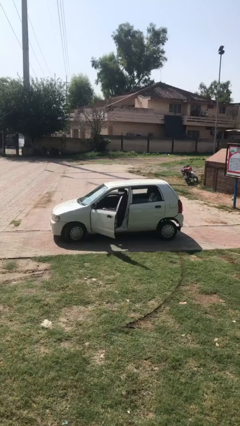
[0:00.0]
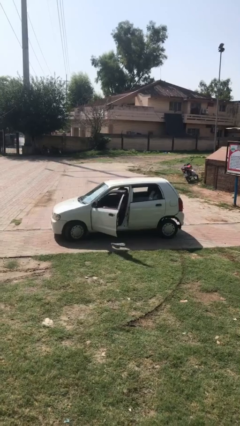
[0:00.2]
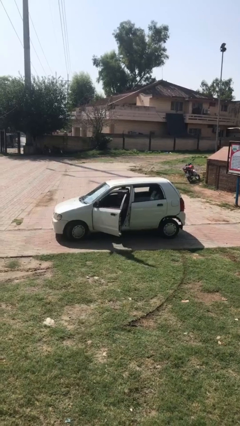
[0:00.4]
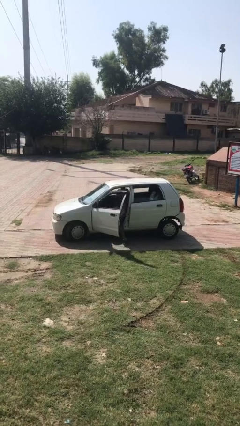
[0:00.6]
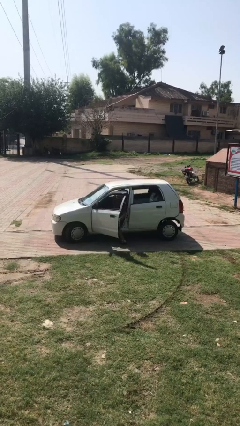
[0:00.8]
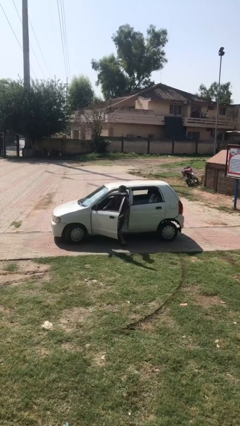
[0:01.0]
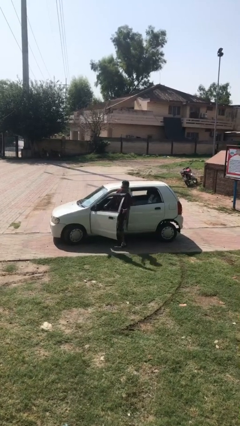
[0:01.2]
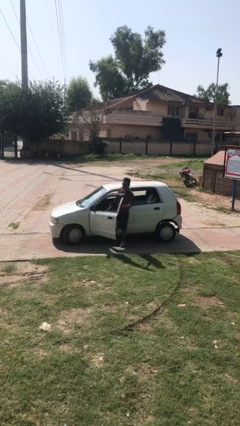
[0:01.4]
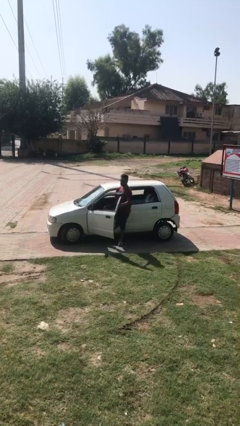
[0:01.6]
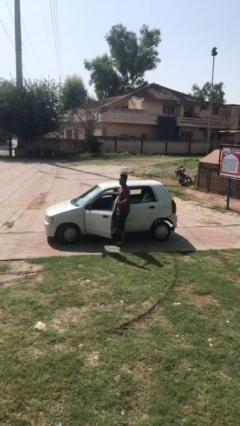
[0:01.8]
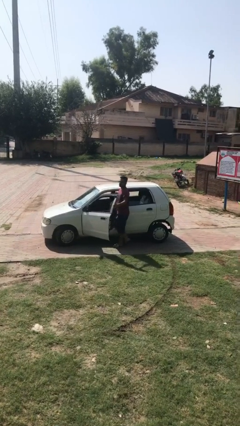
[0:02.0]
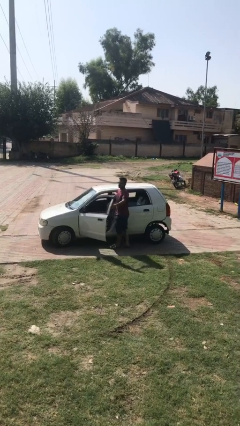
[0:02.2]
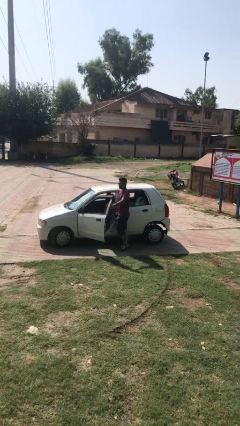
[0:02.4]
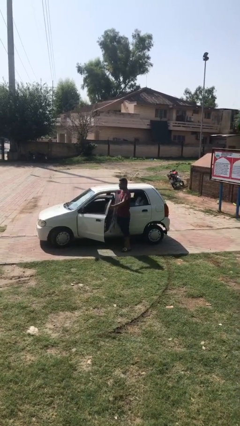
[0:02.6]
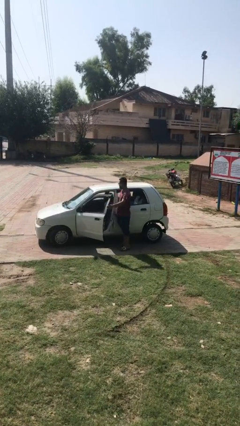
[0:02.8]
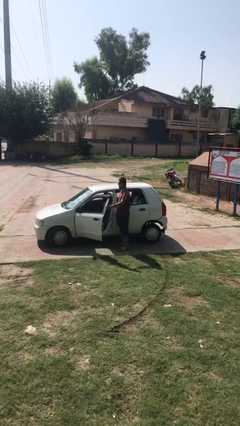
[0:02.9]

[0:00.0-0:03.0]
person exits car

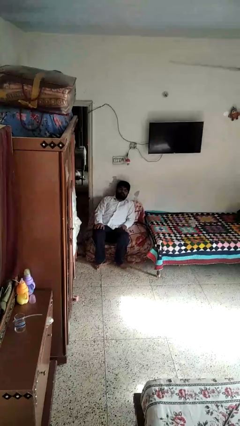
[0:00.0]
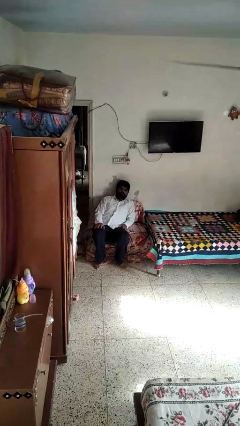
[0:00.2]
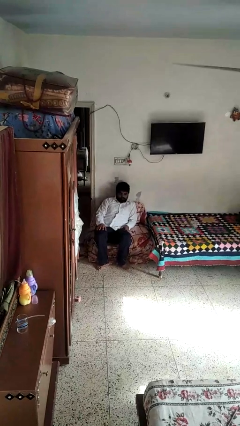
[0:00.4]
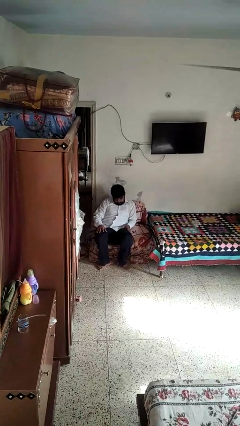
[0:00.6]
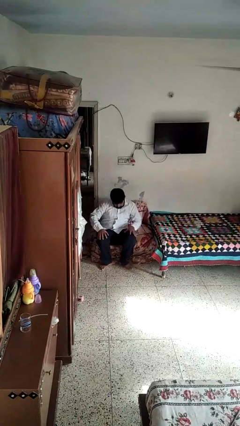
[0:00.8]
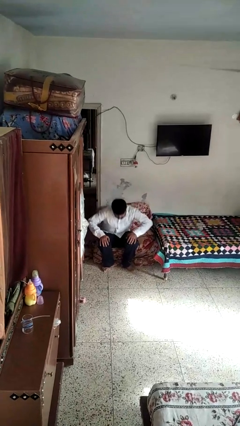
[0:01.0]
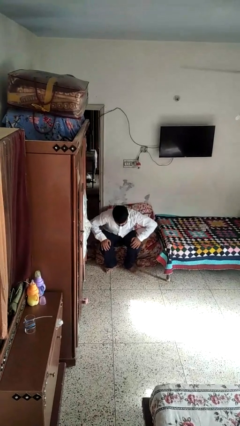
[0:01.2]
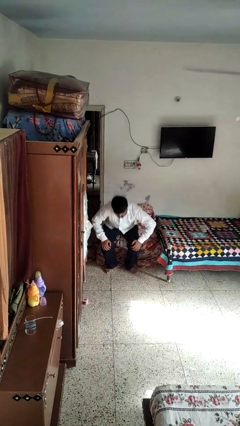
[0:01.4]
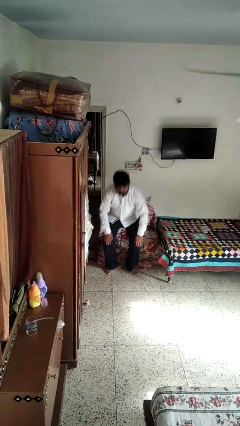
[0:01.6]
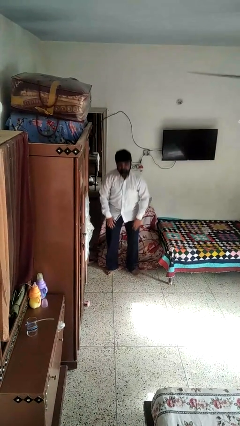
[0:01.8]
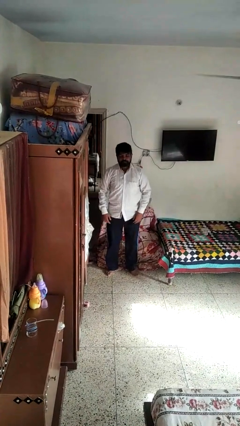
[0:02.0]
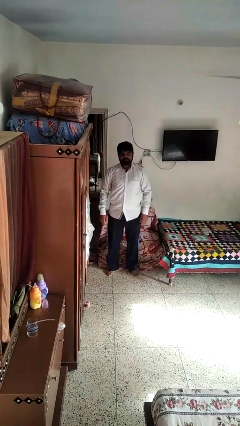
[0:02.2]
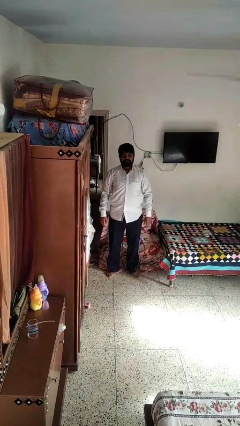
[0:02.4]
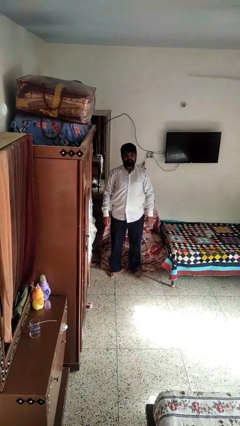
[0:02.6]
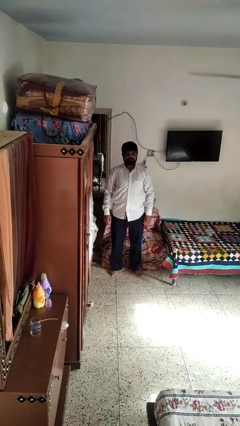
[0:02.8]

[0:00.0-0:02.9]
person stands up

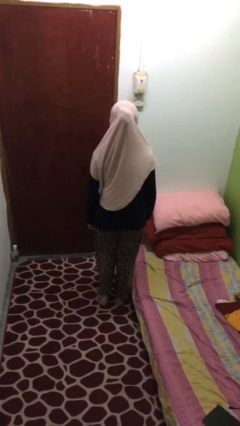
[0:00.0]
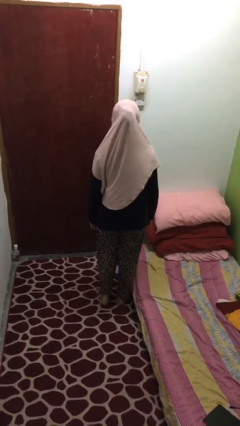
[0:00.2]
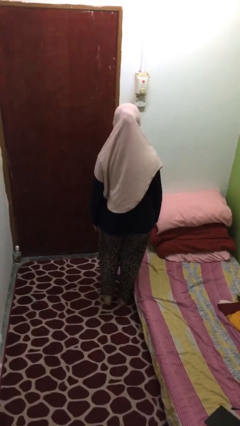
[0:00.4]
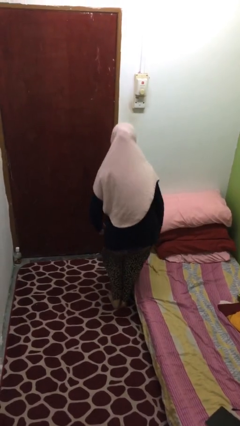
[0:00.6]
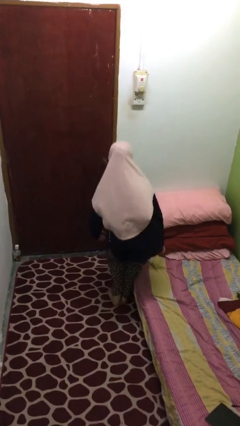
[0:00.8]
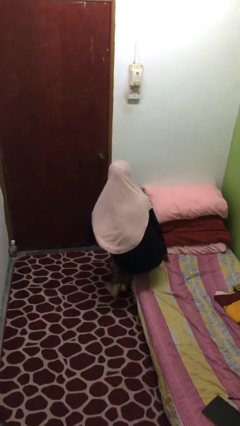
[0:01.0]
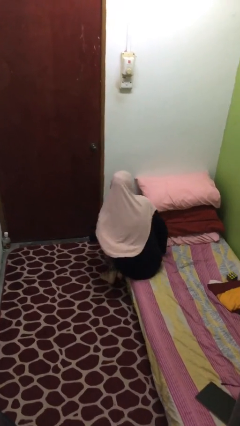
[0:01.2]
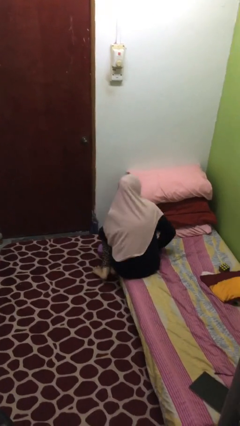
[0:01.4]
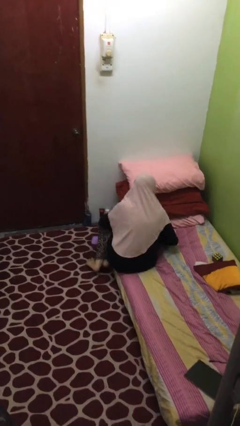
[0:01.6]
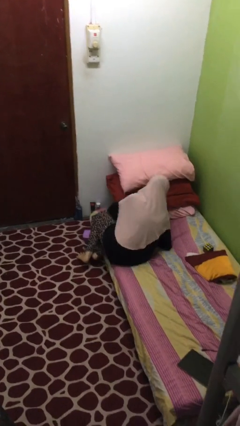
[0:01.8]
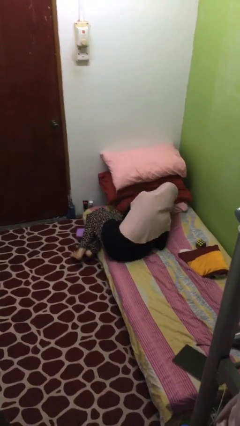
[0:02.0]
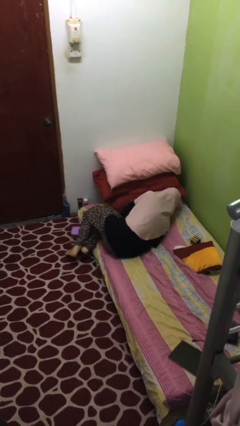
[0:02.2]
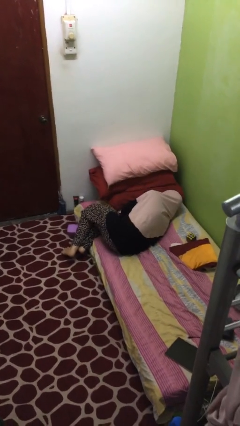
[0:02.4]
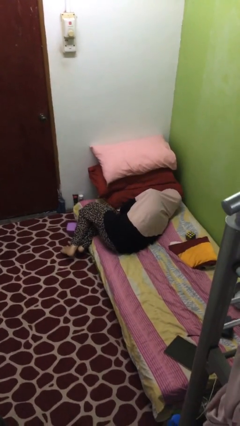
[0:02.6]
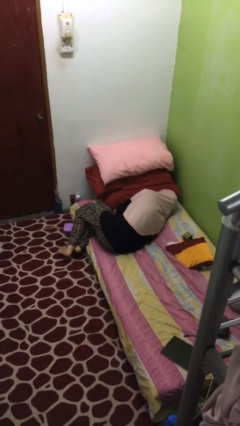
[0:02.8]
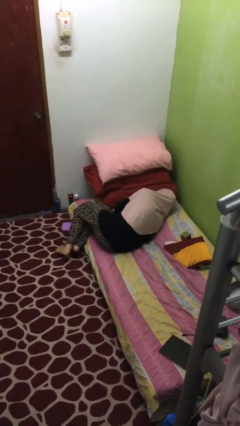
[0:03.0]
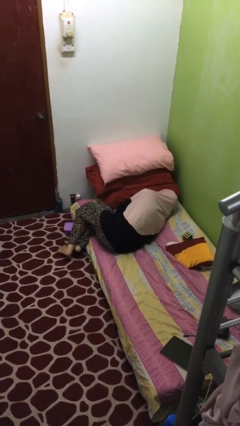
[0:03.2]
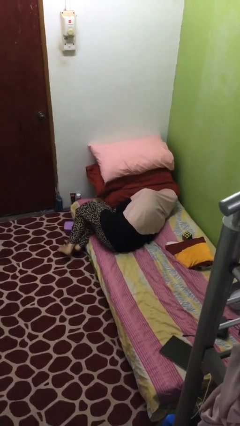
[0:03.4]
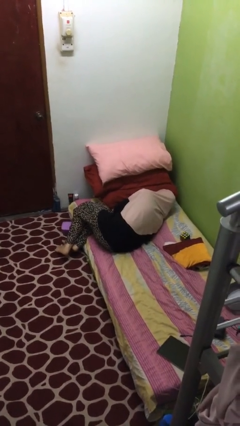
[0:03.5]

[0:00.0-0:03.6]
person lies down on bed

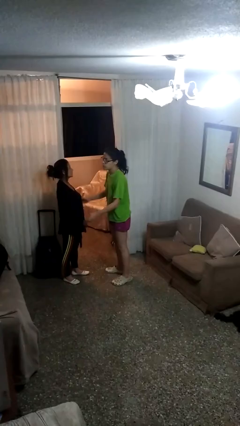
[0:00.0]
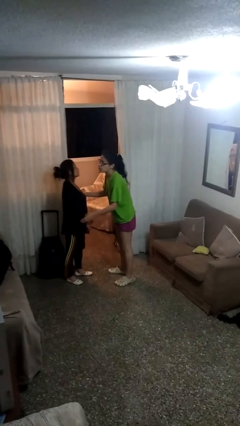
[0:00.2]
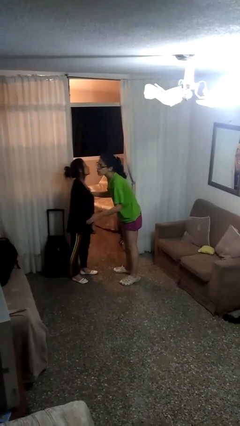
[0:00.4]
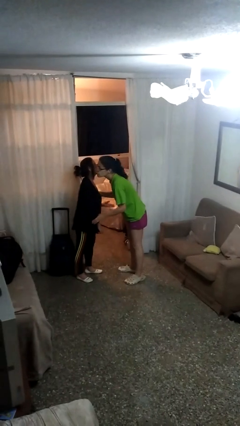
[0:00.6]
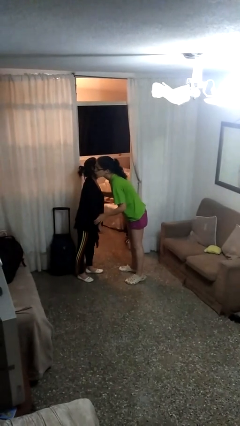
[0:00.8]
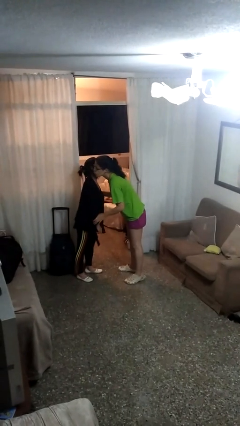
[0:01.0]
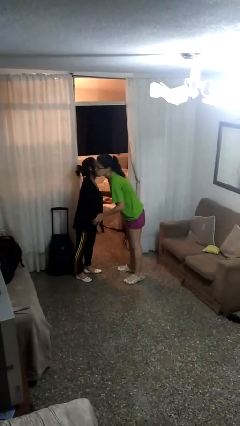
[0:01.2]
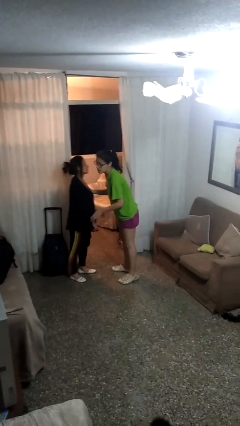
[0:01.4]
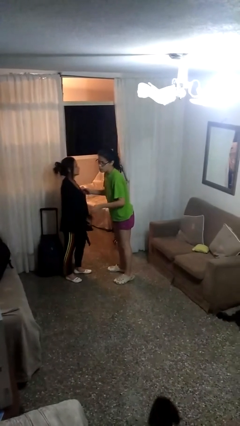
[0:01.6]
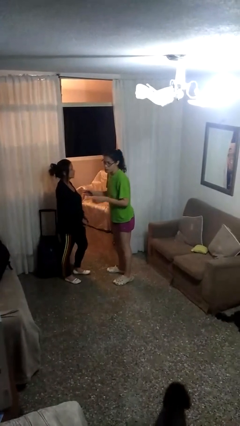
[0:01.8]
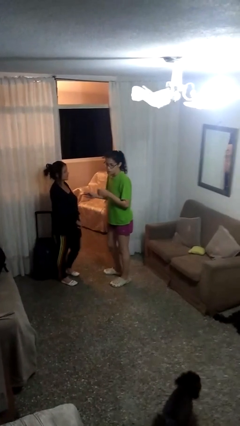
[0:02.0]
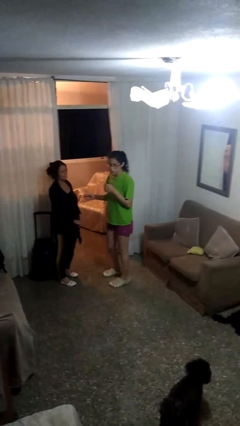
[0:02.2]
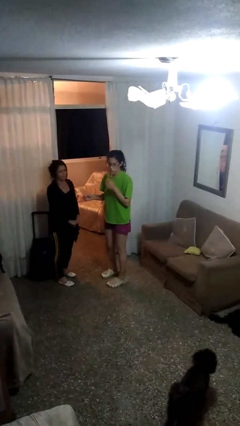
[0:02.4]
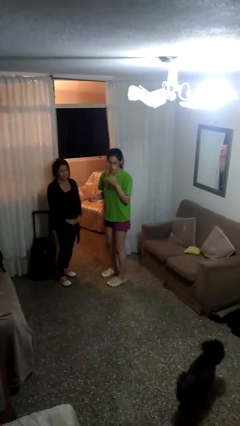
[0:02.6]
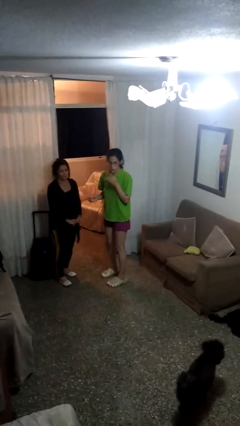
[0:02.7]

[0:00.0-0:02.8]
person kisses cheek of person

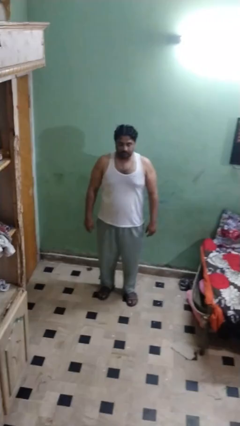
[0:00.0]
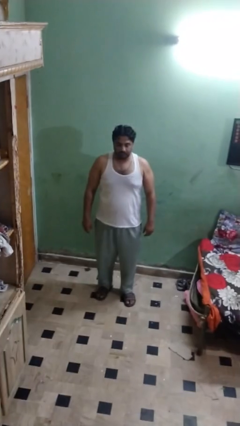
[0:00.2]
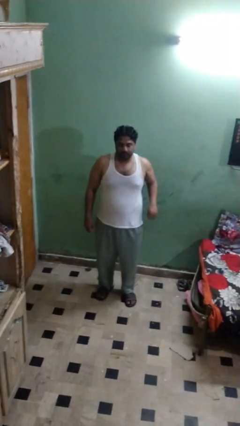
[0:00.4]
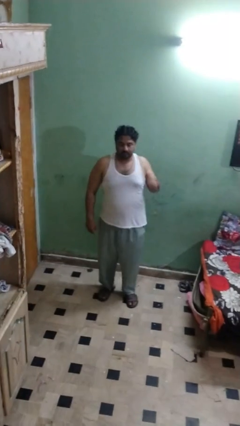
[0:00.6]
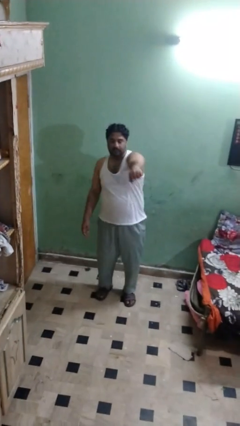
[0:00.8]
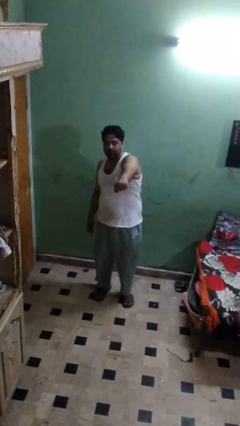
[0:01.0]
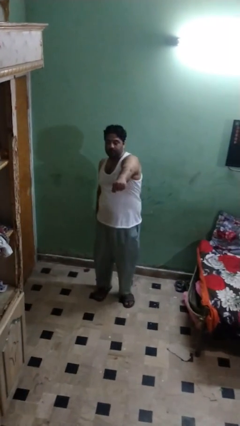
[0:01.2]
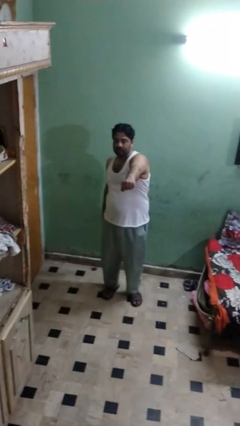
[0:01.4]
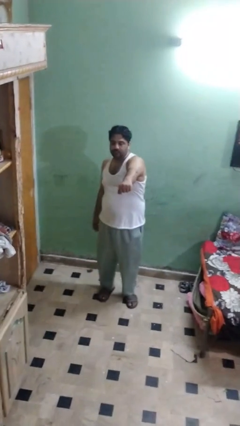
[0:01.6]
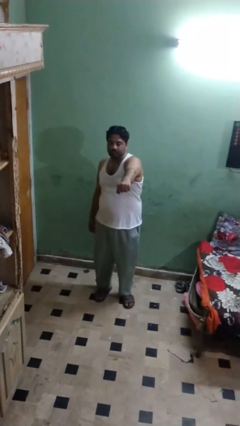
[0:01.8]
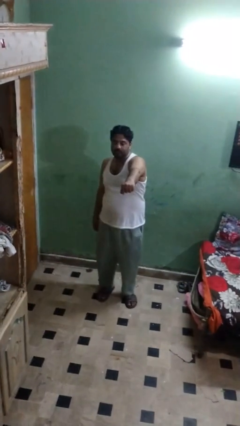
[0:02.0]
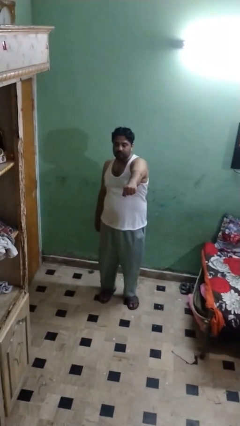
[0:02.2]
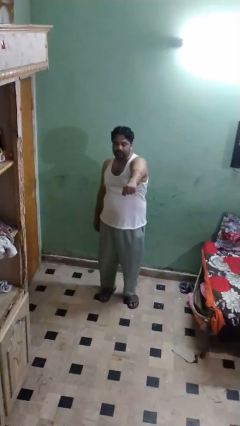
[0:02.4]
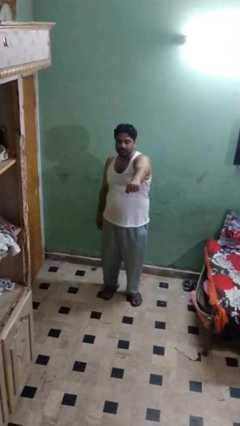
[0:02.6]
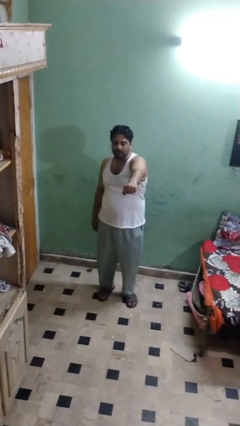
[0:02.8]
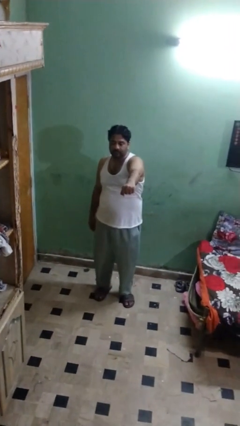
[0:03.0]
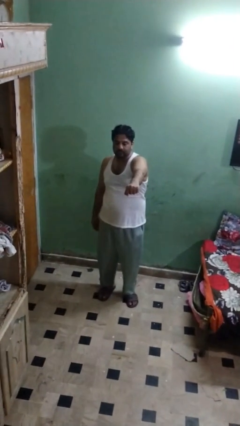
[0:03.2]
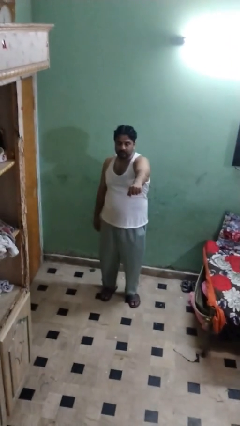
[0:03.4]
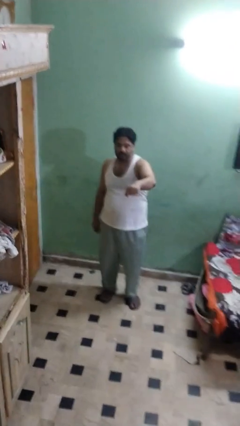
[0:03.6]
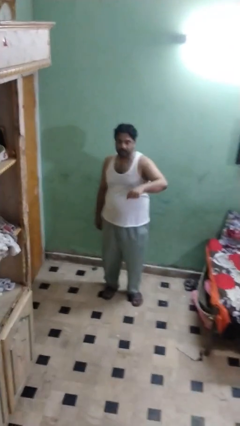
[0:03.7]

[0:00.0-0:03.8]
person punches

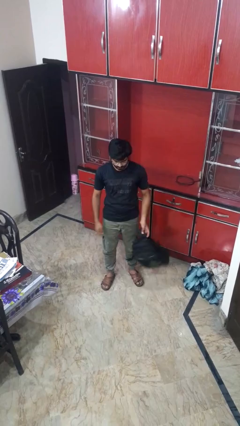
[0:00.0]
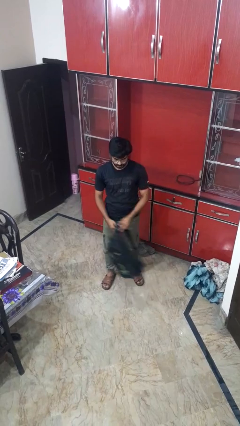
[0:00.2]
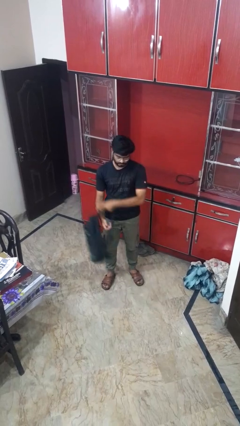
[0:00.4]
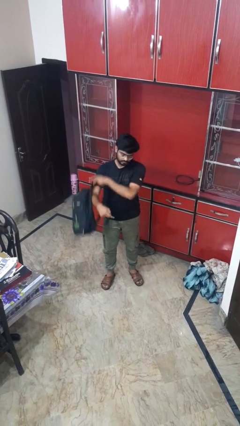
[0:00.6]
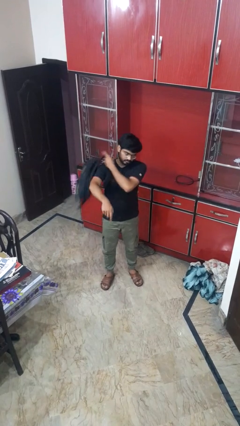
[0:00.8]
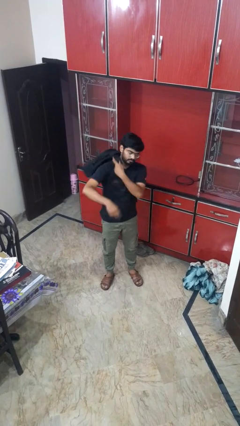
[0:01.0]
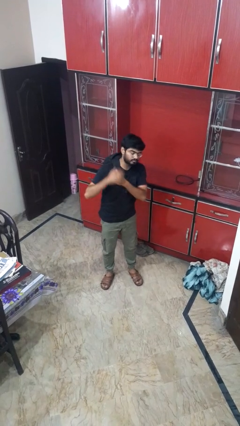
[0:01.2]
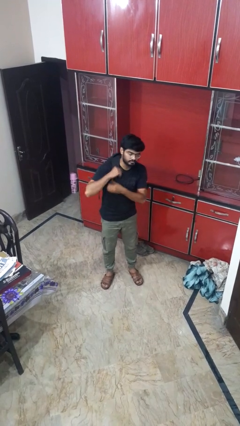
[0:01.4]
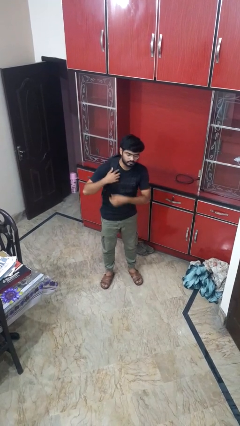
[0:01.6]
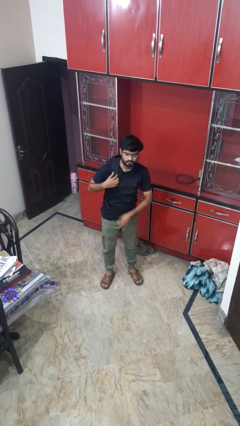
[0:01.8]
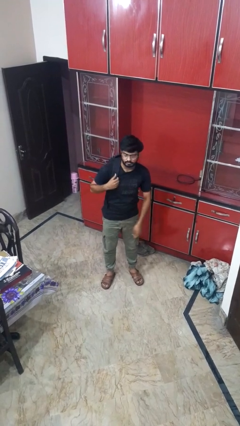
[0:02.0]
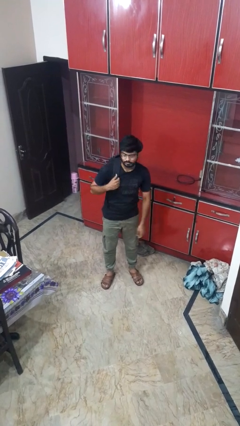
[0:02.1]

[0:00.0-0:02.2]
person puts on backpack
